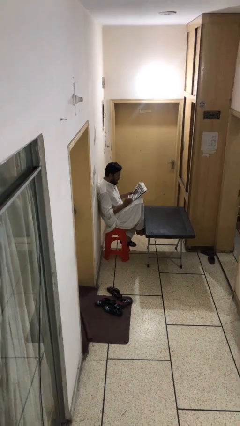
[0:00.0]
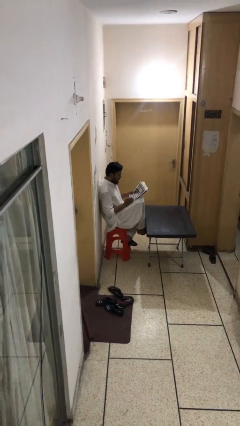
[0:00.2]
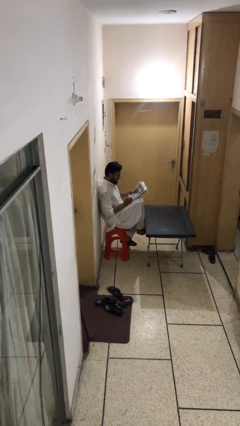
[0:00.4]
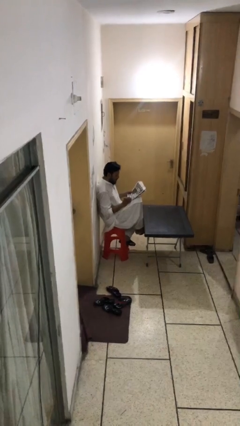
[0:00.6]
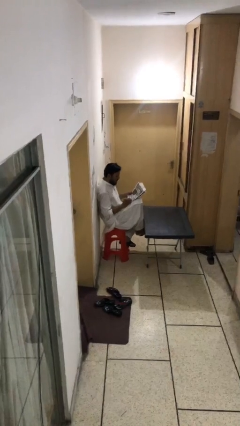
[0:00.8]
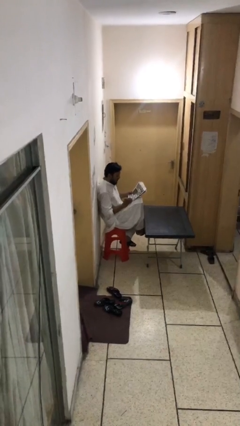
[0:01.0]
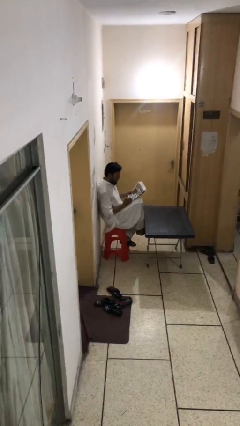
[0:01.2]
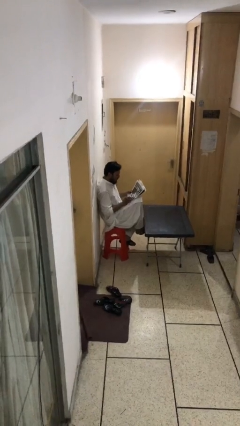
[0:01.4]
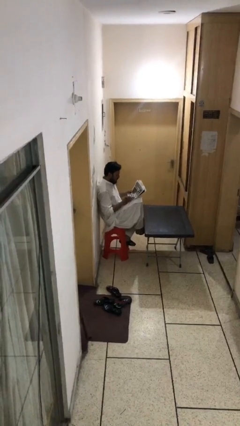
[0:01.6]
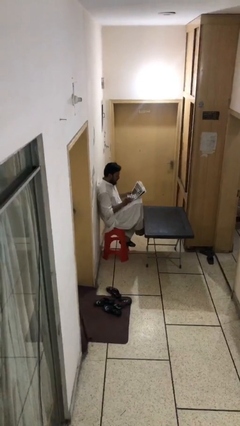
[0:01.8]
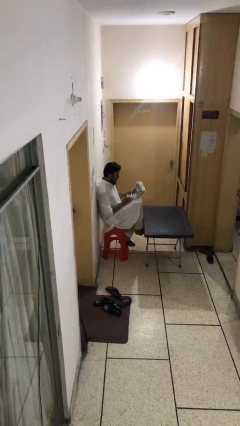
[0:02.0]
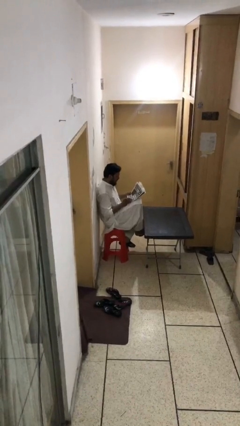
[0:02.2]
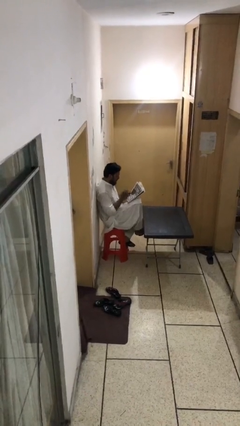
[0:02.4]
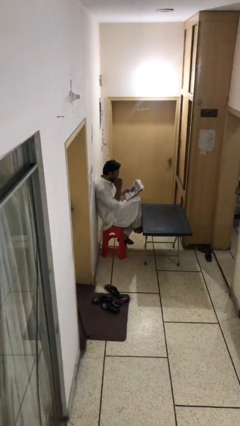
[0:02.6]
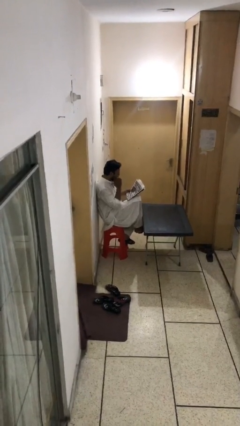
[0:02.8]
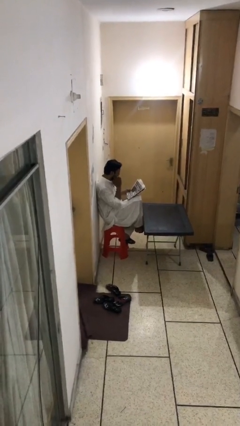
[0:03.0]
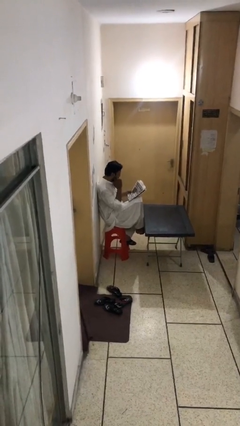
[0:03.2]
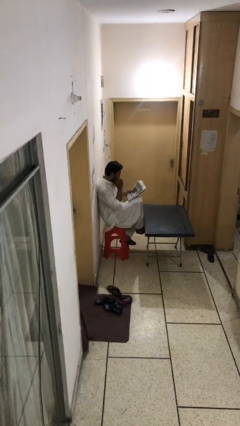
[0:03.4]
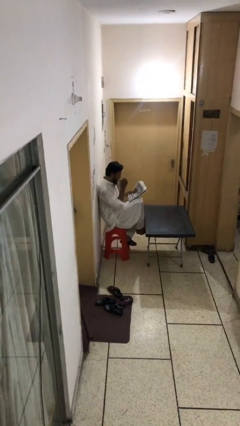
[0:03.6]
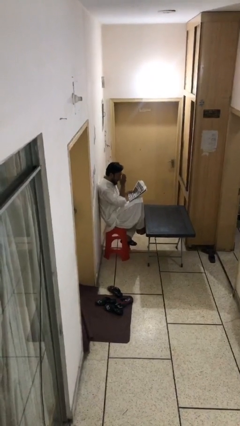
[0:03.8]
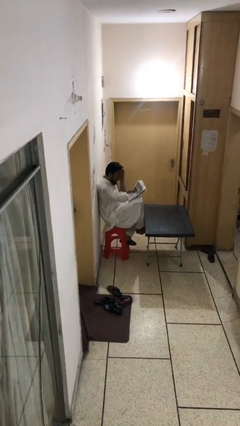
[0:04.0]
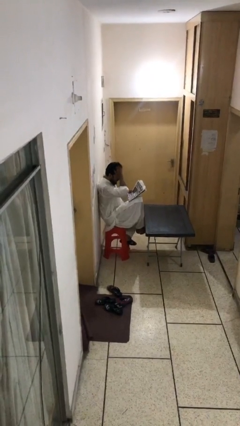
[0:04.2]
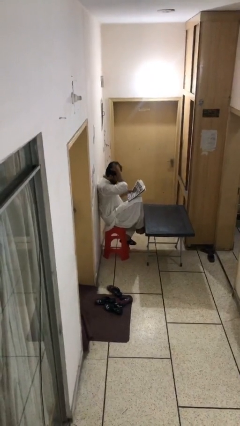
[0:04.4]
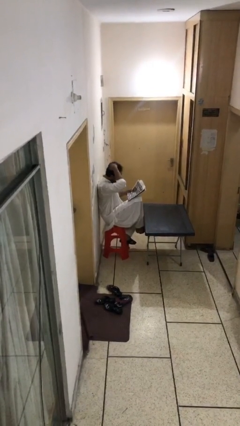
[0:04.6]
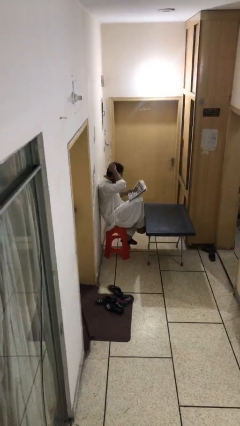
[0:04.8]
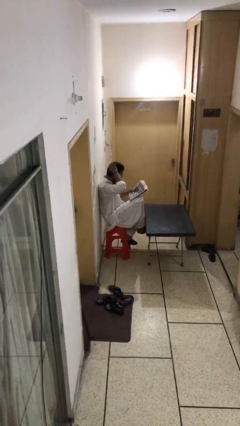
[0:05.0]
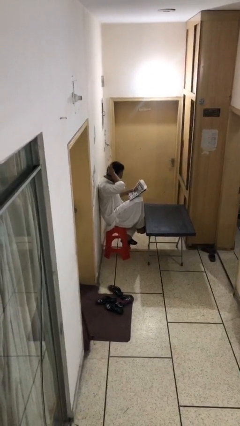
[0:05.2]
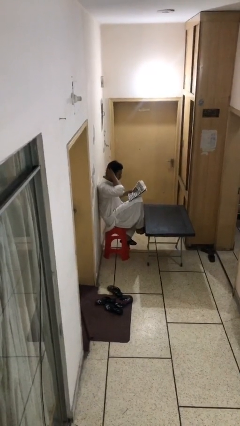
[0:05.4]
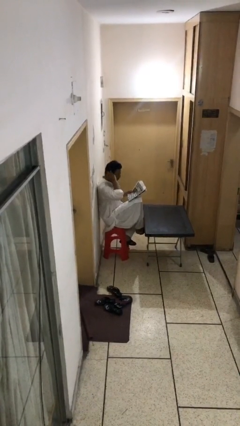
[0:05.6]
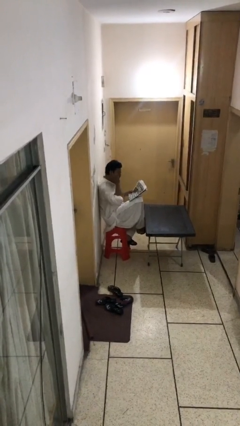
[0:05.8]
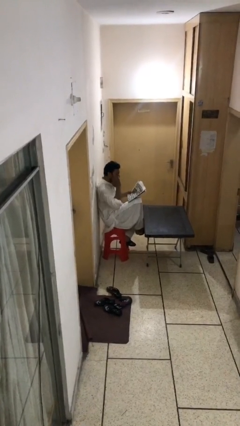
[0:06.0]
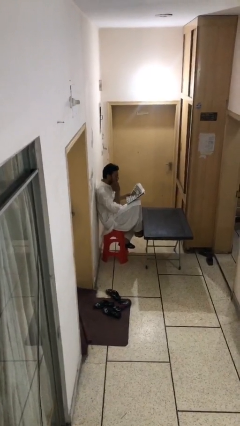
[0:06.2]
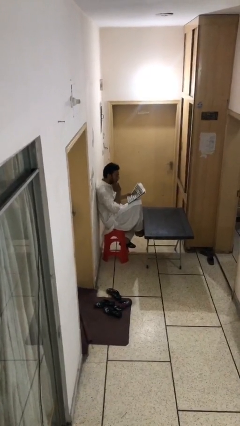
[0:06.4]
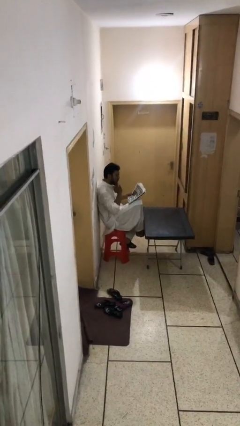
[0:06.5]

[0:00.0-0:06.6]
person reads document

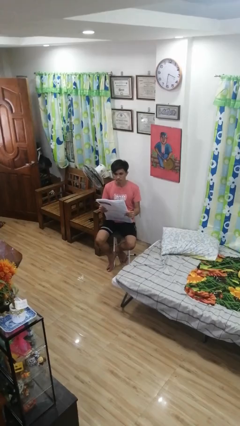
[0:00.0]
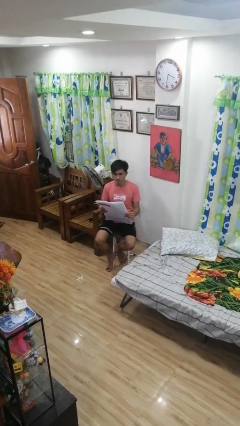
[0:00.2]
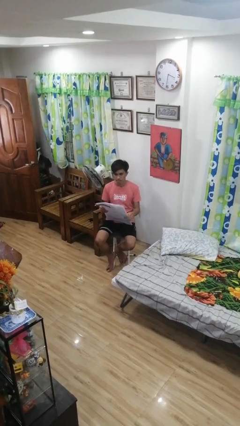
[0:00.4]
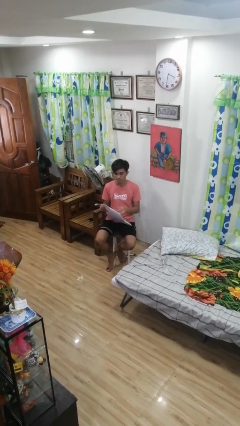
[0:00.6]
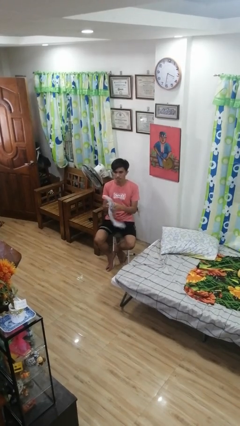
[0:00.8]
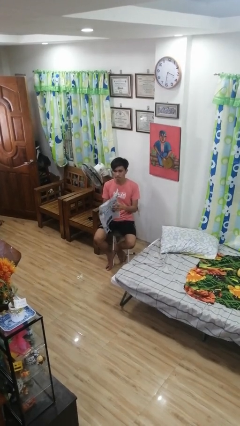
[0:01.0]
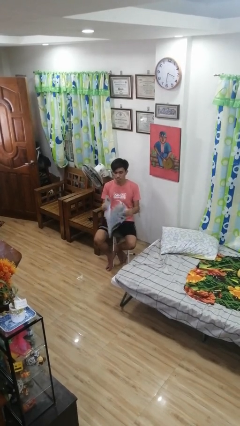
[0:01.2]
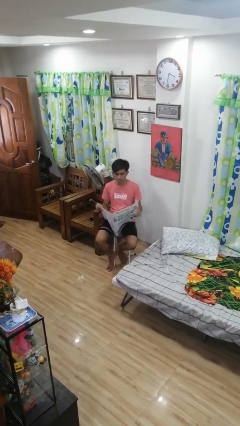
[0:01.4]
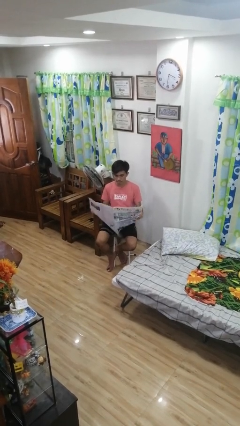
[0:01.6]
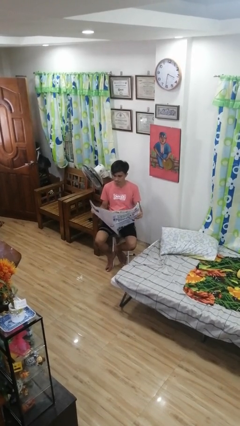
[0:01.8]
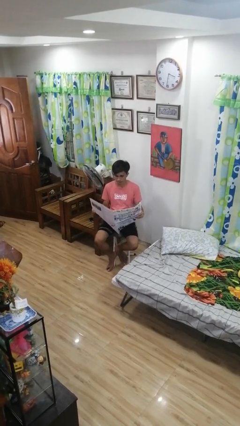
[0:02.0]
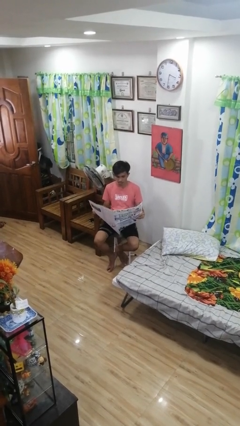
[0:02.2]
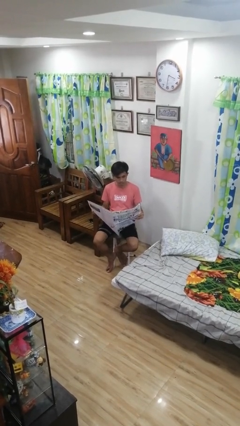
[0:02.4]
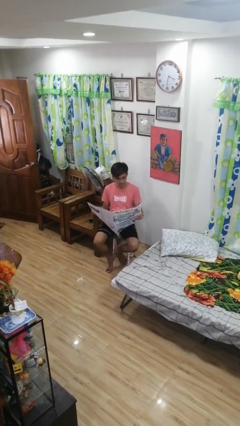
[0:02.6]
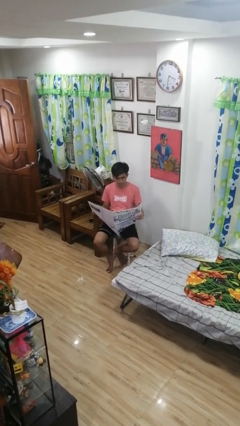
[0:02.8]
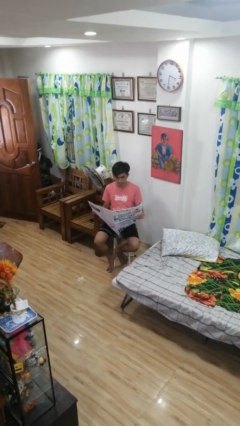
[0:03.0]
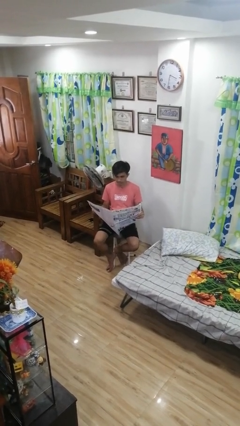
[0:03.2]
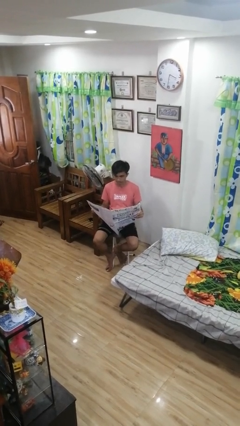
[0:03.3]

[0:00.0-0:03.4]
person reads newspaper

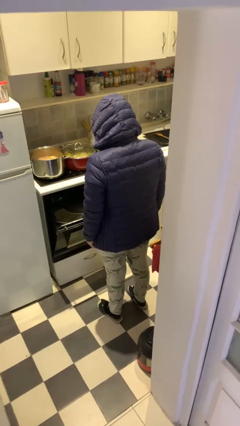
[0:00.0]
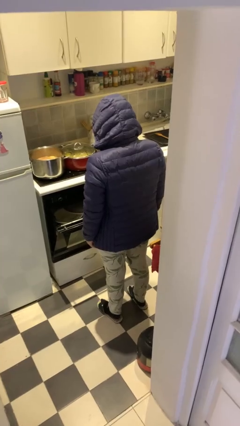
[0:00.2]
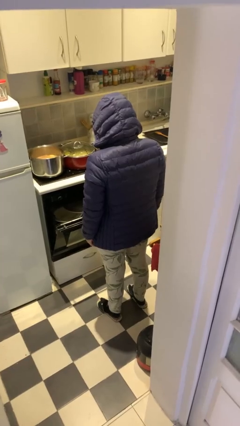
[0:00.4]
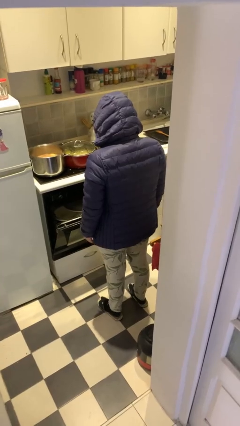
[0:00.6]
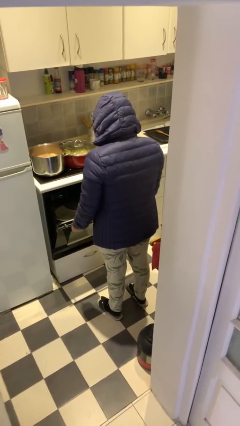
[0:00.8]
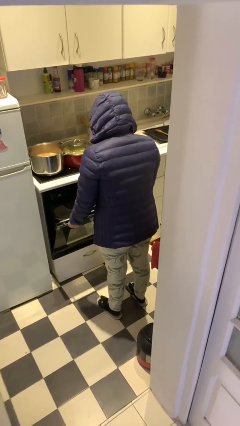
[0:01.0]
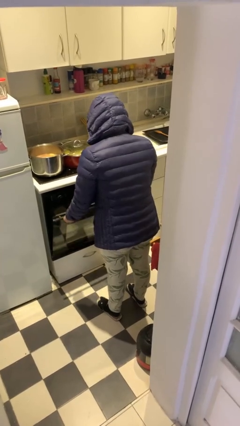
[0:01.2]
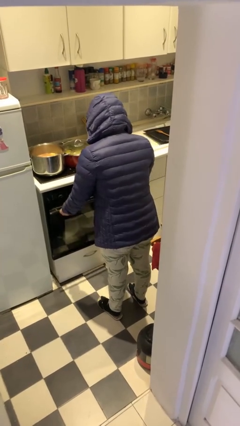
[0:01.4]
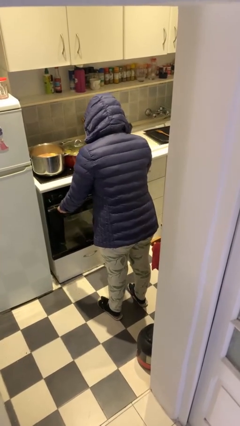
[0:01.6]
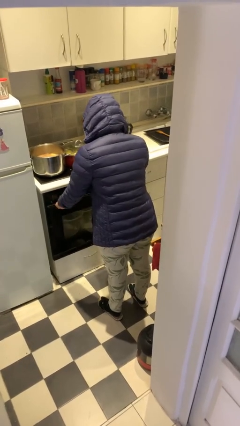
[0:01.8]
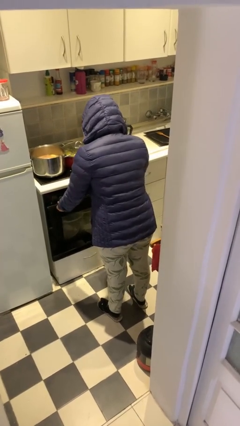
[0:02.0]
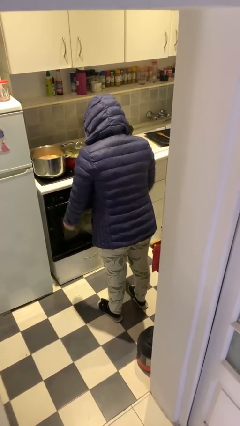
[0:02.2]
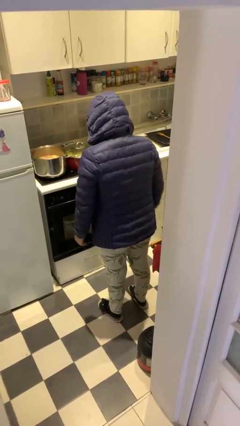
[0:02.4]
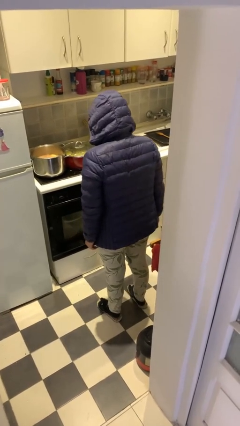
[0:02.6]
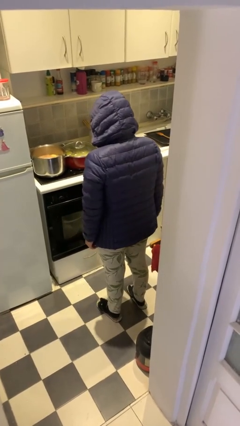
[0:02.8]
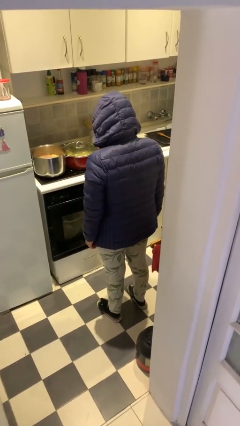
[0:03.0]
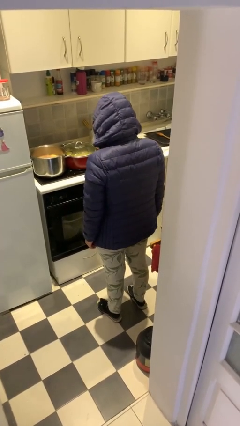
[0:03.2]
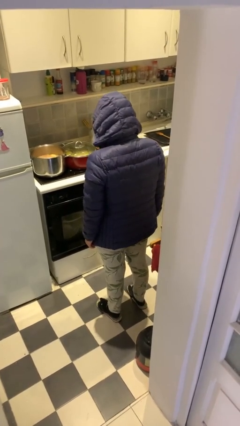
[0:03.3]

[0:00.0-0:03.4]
person closes dishwasher

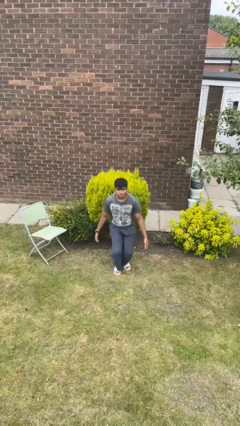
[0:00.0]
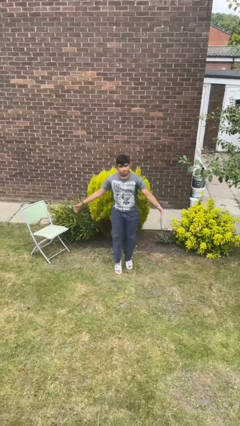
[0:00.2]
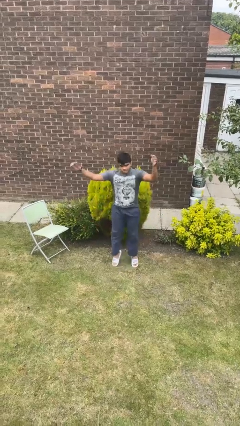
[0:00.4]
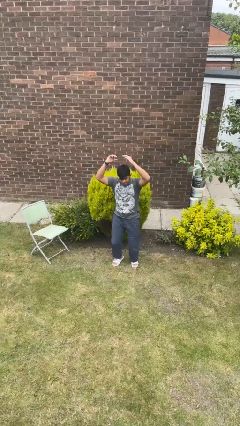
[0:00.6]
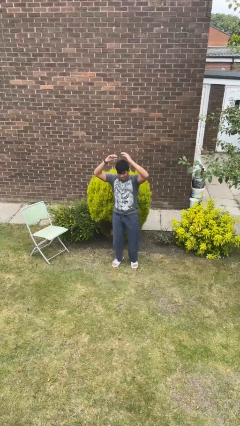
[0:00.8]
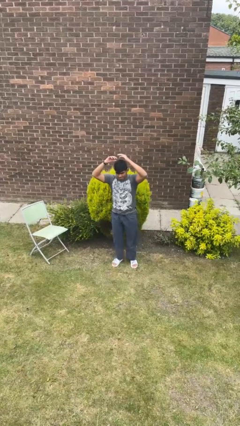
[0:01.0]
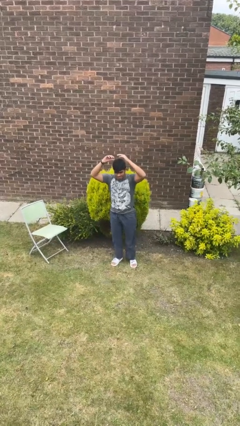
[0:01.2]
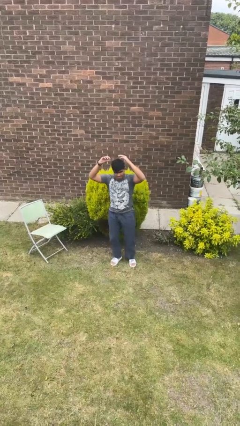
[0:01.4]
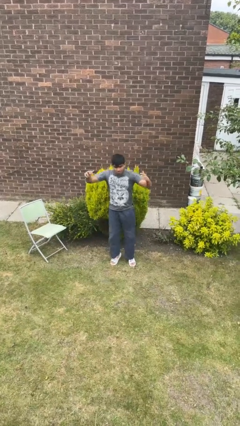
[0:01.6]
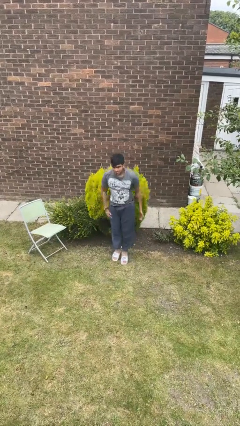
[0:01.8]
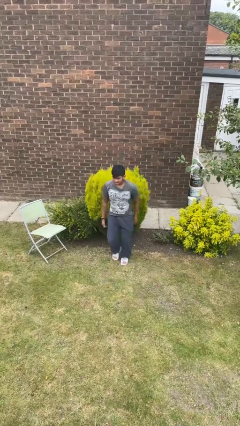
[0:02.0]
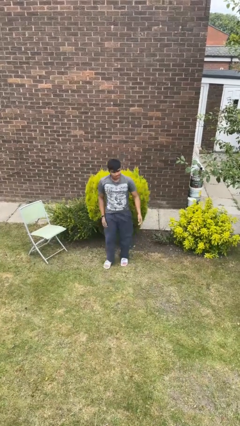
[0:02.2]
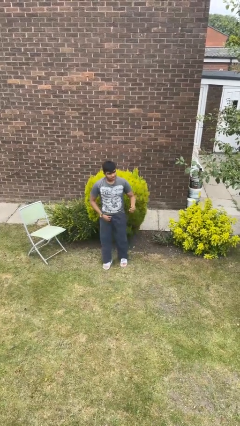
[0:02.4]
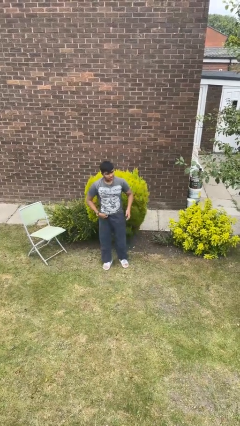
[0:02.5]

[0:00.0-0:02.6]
person exercises with jumping jacks

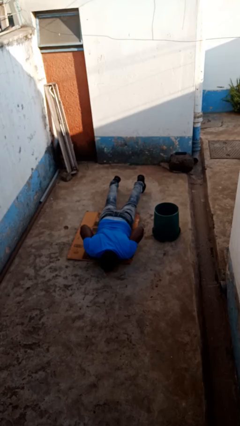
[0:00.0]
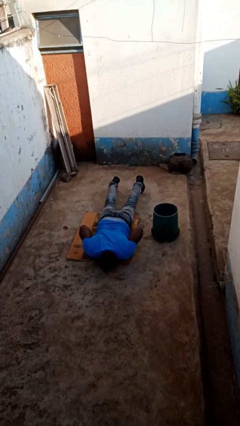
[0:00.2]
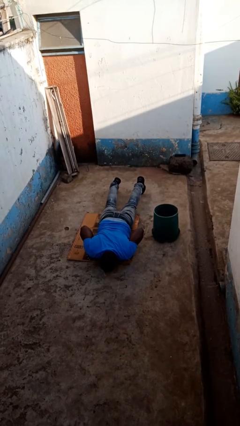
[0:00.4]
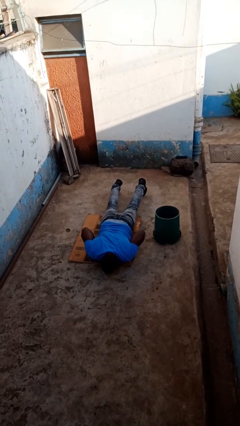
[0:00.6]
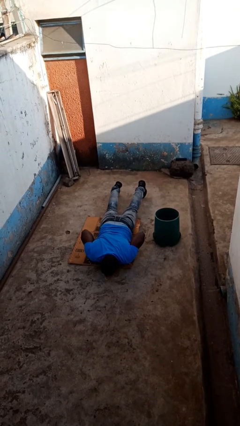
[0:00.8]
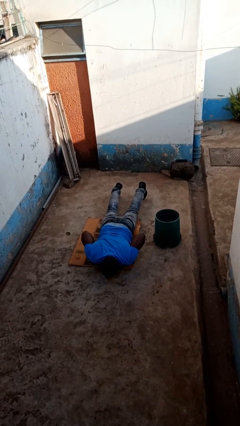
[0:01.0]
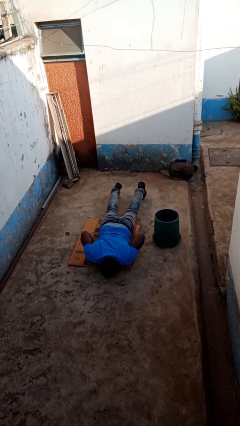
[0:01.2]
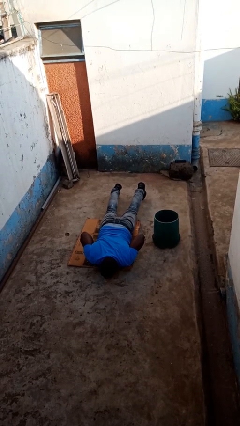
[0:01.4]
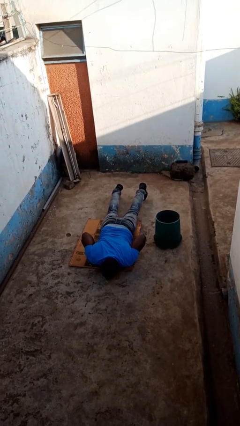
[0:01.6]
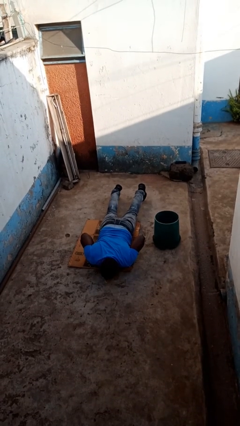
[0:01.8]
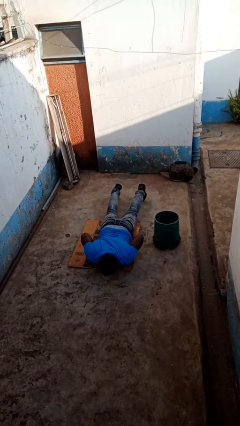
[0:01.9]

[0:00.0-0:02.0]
person lies down on floor
